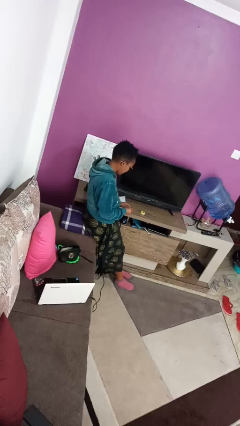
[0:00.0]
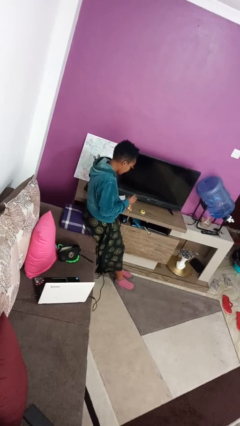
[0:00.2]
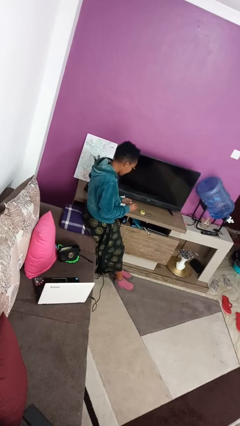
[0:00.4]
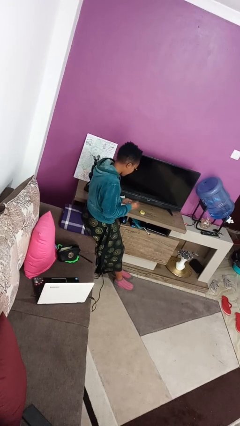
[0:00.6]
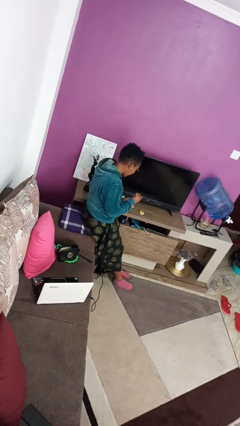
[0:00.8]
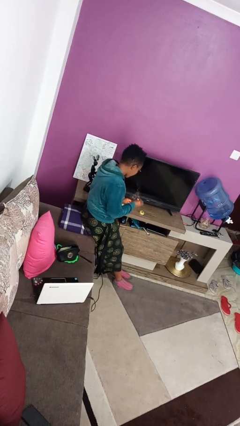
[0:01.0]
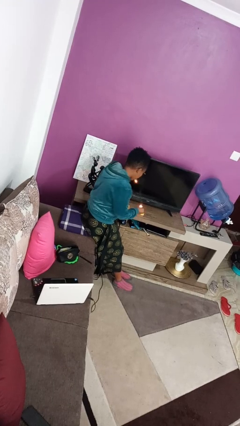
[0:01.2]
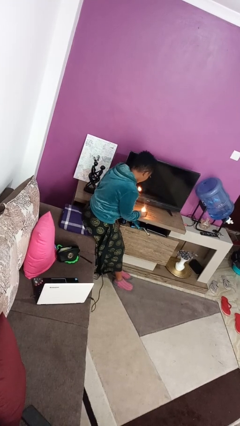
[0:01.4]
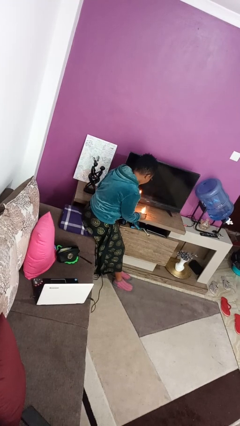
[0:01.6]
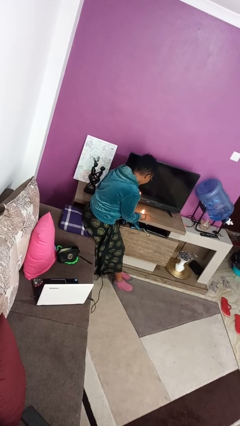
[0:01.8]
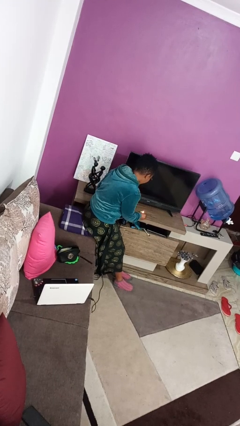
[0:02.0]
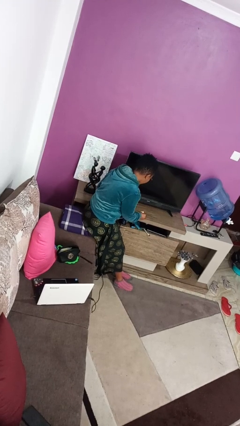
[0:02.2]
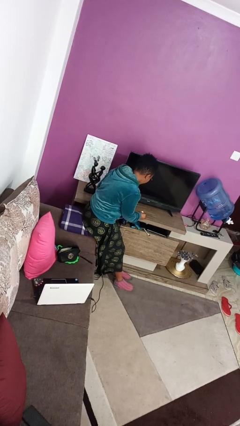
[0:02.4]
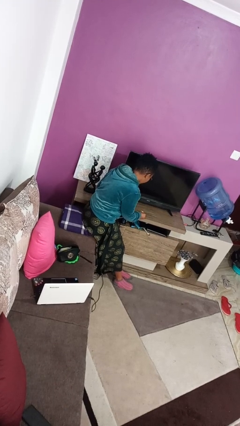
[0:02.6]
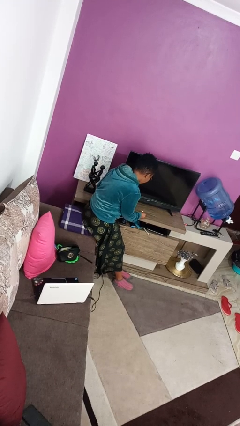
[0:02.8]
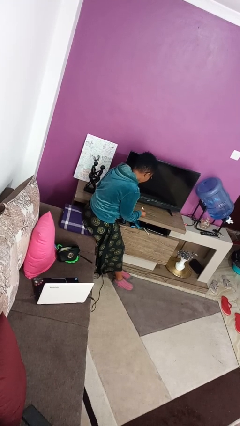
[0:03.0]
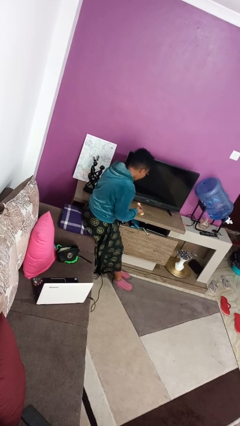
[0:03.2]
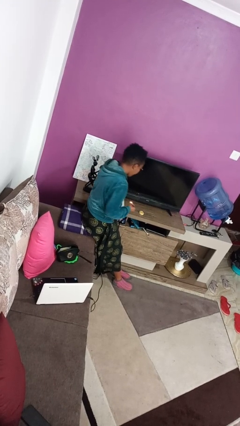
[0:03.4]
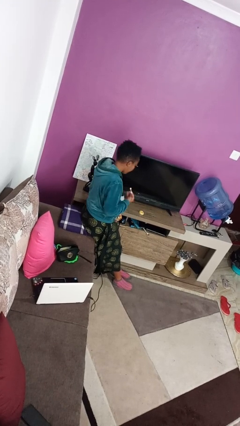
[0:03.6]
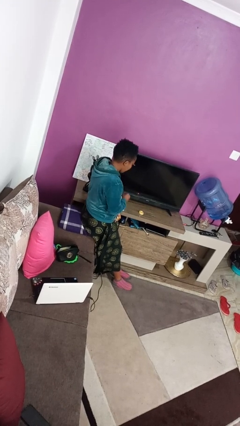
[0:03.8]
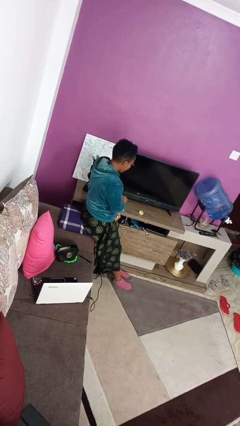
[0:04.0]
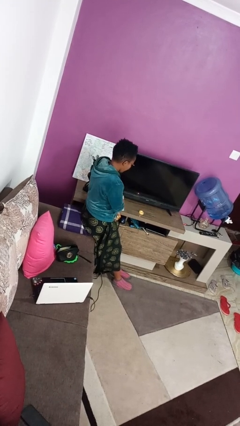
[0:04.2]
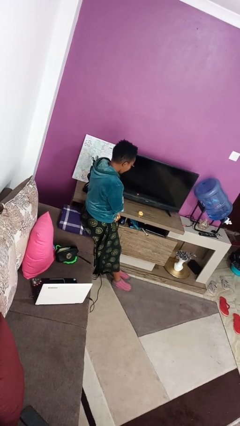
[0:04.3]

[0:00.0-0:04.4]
person lights candle

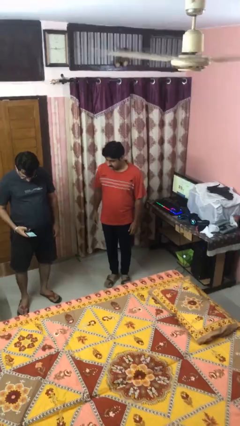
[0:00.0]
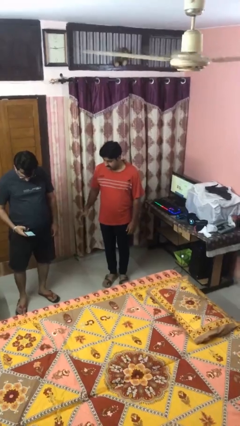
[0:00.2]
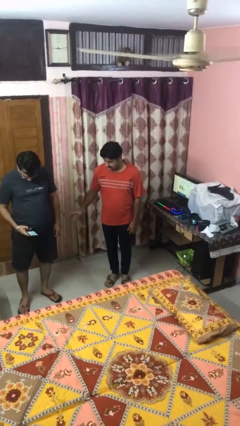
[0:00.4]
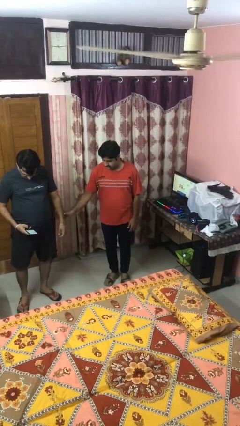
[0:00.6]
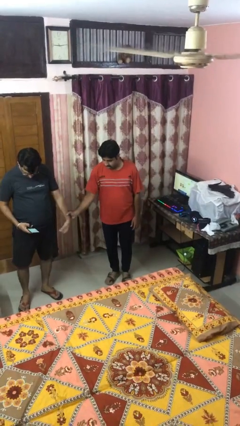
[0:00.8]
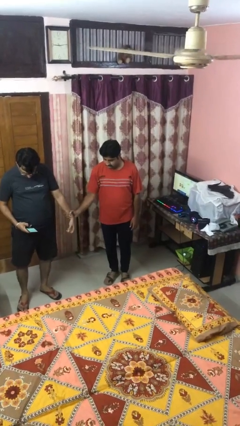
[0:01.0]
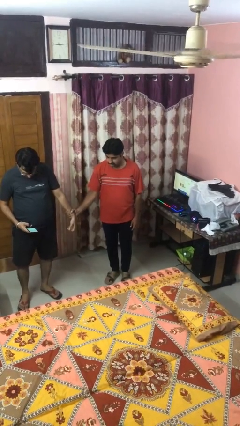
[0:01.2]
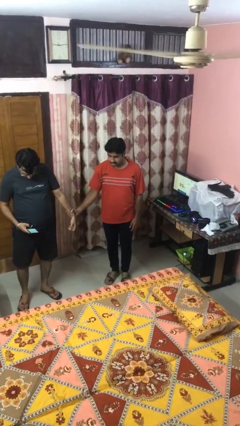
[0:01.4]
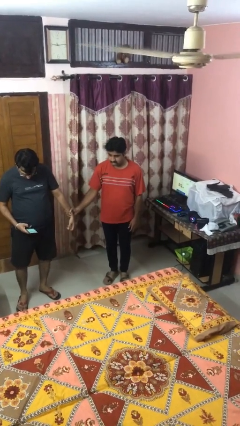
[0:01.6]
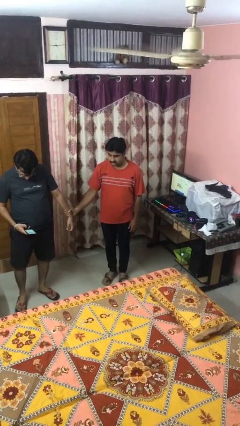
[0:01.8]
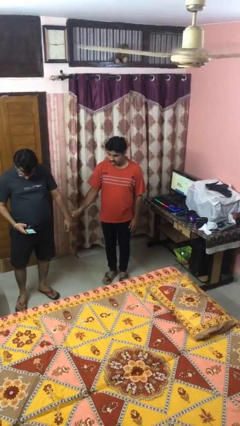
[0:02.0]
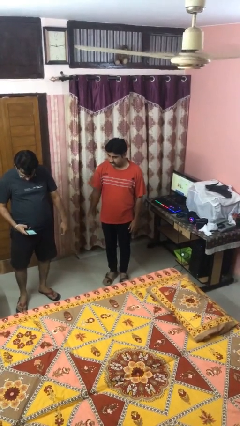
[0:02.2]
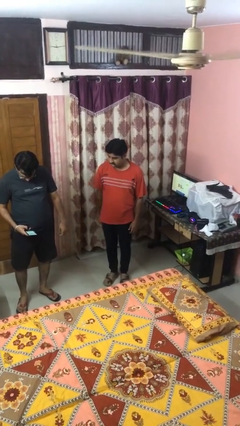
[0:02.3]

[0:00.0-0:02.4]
person grabs person by forearm

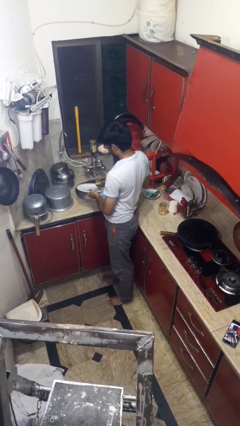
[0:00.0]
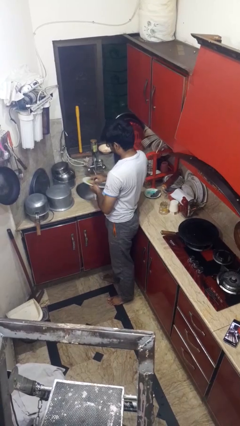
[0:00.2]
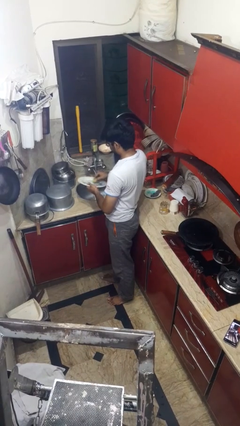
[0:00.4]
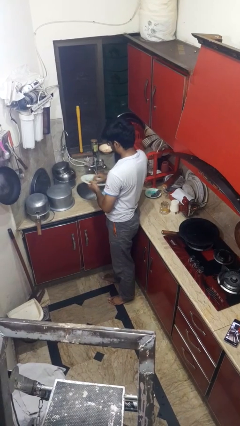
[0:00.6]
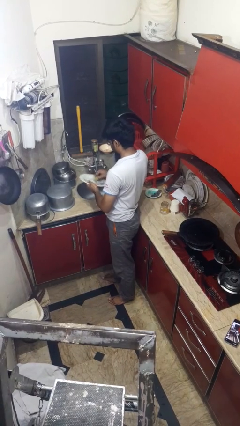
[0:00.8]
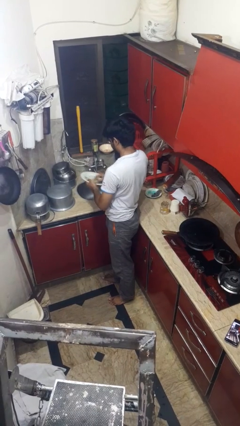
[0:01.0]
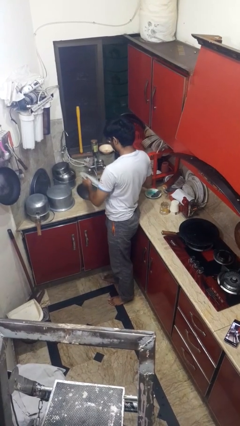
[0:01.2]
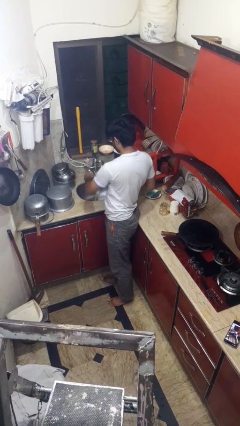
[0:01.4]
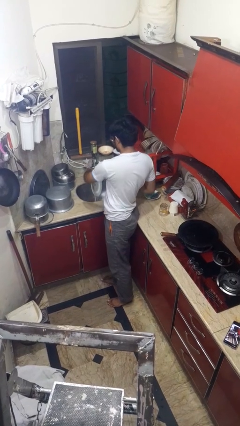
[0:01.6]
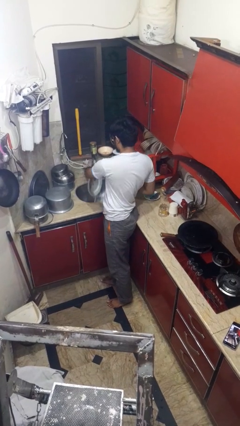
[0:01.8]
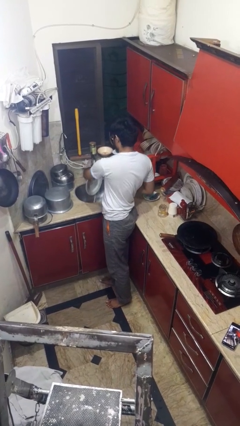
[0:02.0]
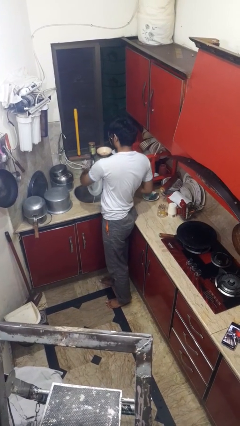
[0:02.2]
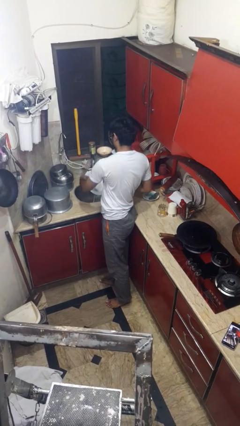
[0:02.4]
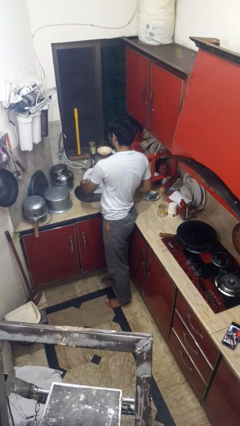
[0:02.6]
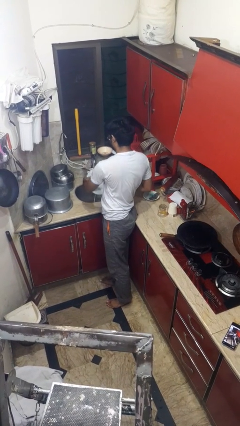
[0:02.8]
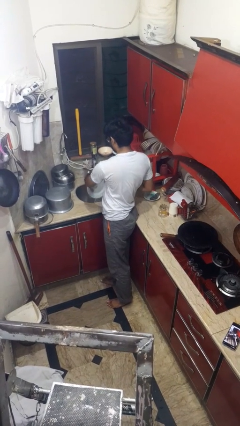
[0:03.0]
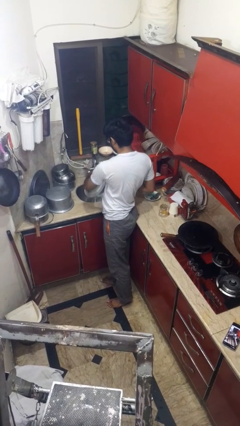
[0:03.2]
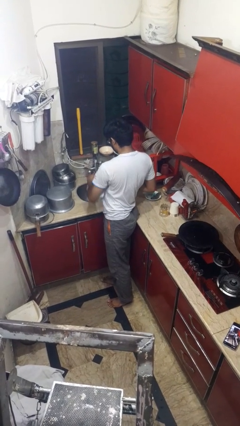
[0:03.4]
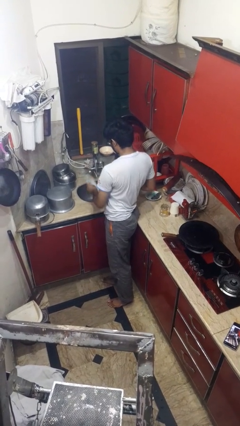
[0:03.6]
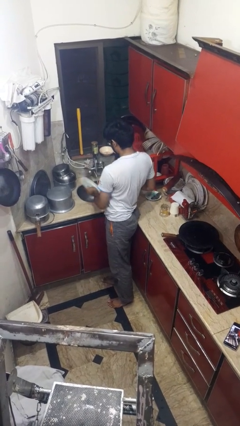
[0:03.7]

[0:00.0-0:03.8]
person washes dish

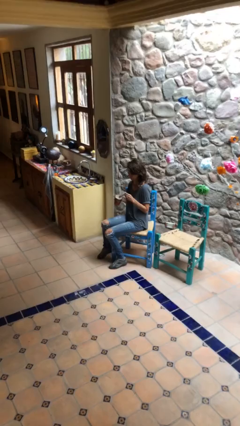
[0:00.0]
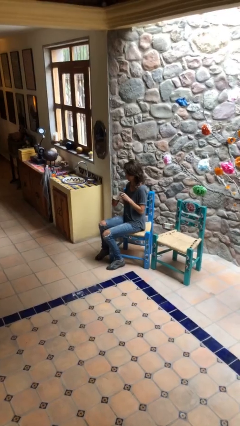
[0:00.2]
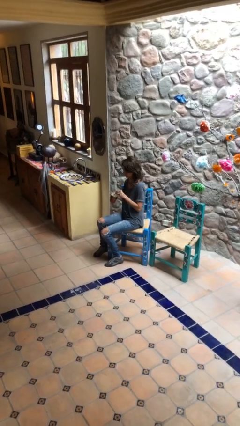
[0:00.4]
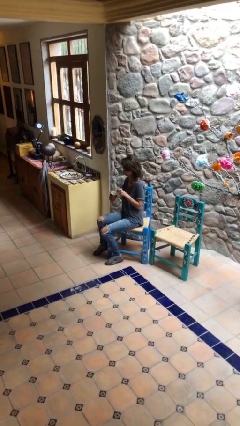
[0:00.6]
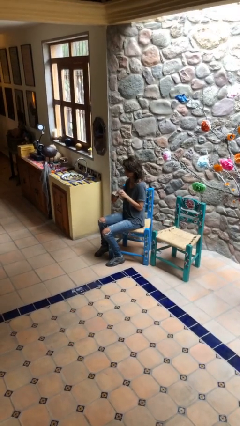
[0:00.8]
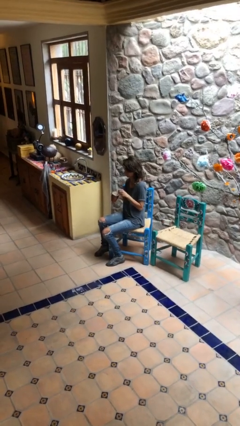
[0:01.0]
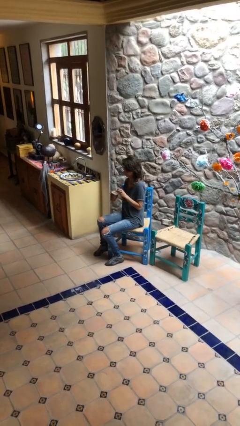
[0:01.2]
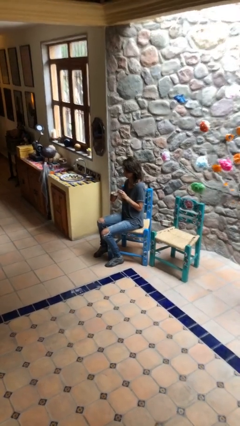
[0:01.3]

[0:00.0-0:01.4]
person stirs mug

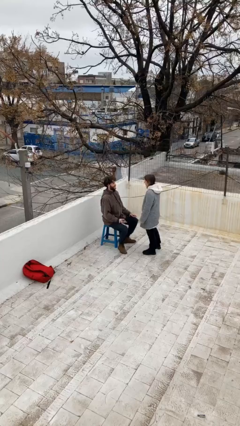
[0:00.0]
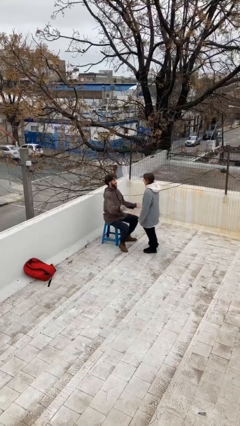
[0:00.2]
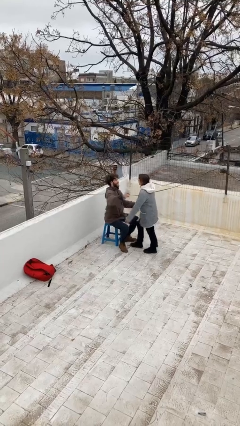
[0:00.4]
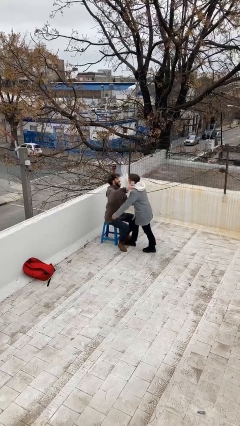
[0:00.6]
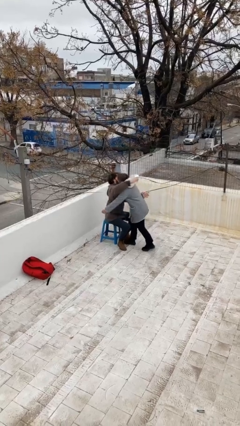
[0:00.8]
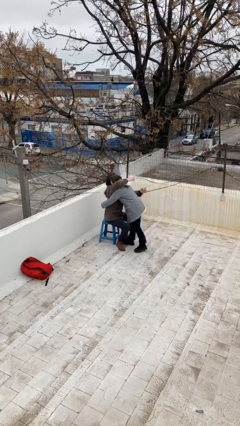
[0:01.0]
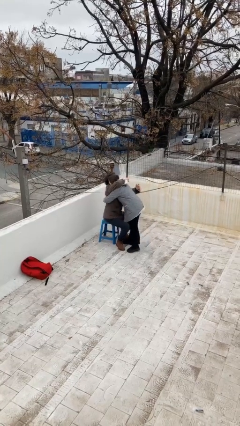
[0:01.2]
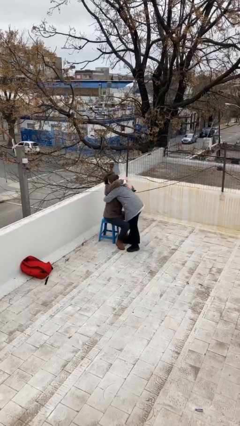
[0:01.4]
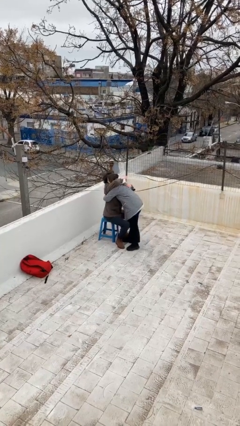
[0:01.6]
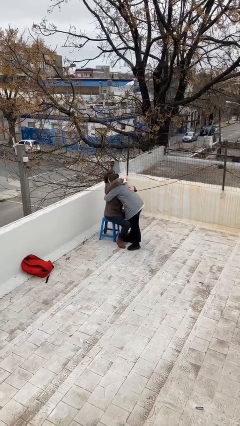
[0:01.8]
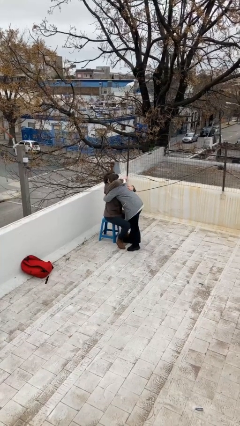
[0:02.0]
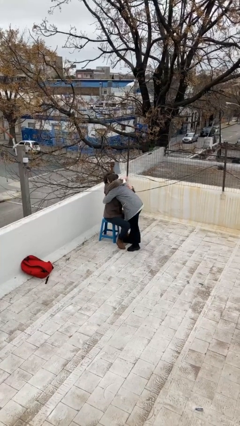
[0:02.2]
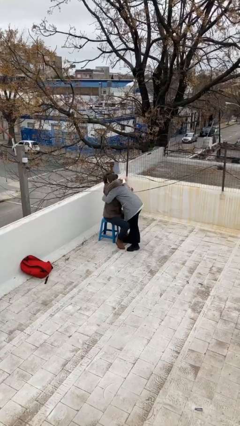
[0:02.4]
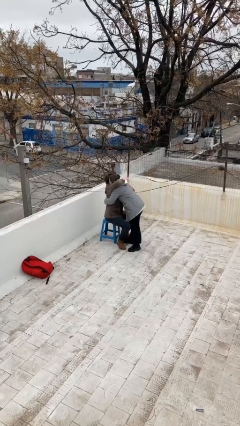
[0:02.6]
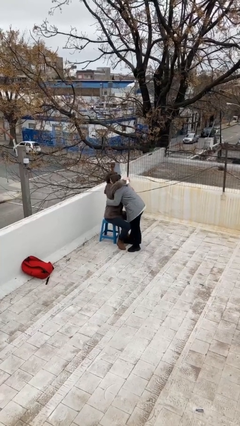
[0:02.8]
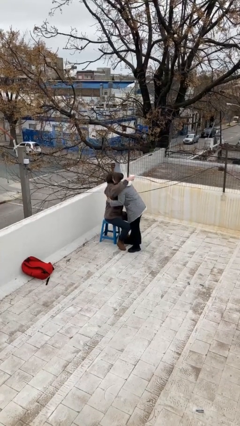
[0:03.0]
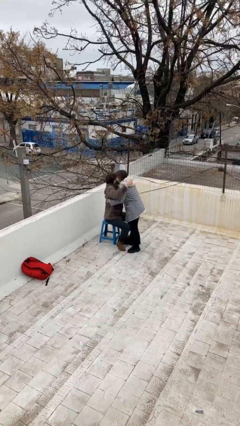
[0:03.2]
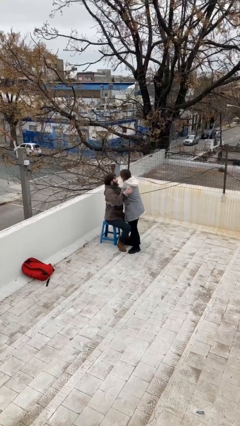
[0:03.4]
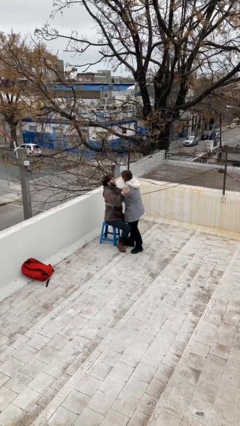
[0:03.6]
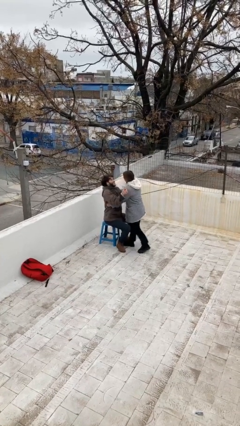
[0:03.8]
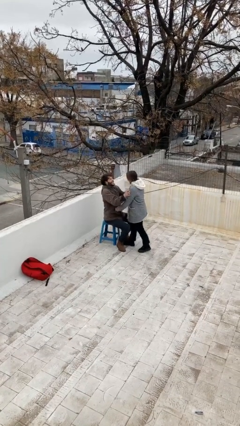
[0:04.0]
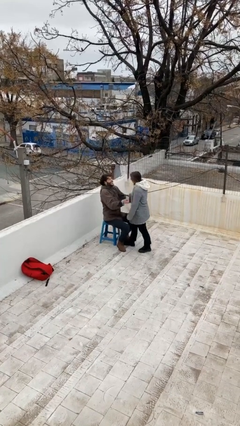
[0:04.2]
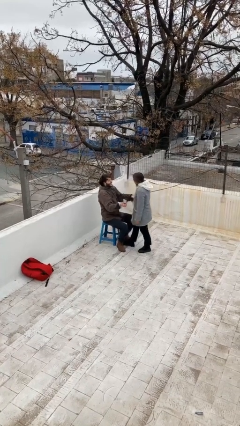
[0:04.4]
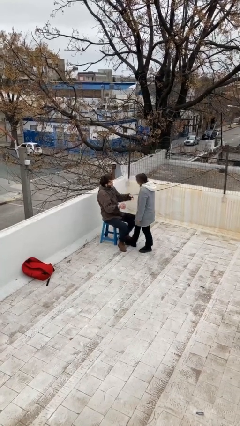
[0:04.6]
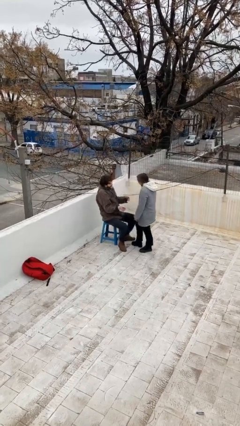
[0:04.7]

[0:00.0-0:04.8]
person embraces person

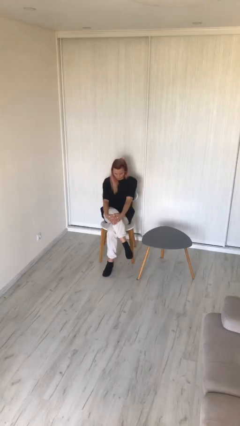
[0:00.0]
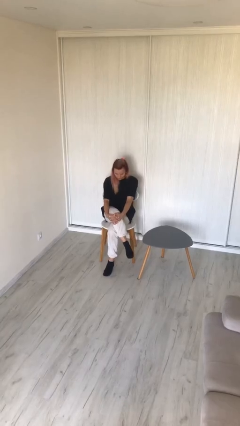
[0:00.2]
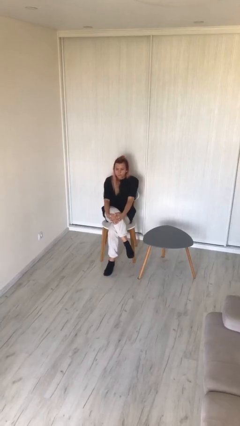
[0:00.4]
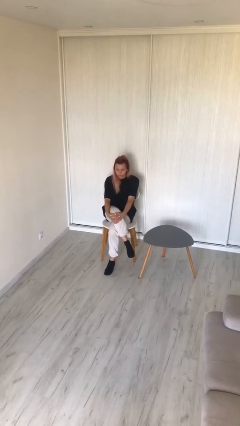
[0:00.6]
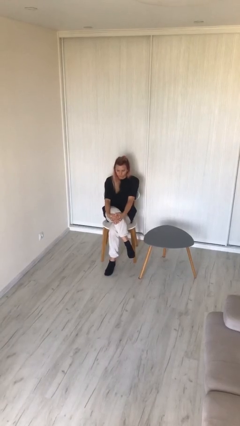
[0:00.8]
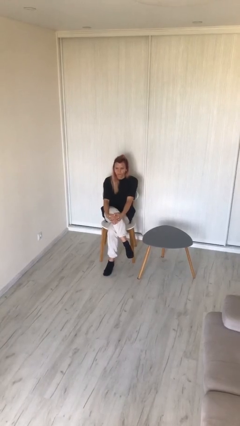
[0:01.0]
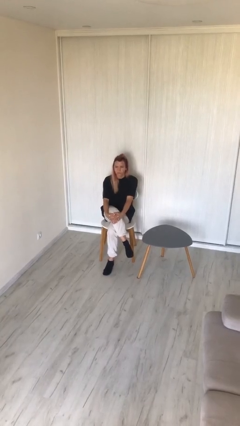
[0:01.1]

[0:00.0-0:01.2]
person nods head
